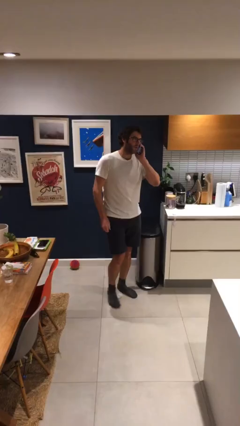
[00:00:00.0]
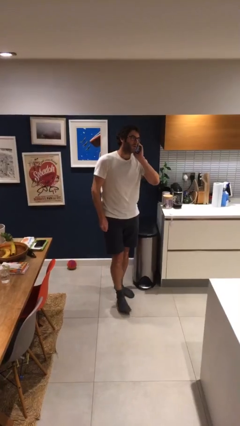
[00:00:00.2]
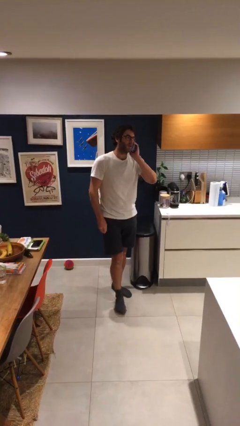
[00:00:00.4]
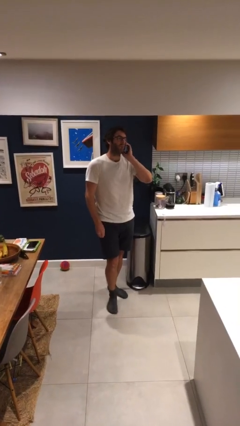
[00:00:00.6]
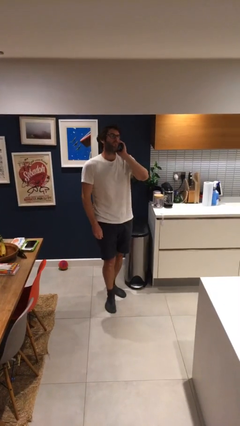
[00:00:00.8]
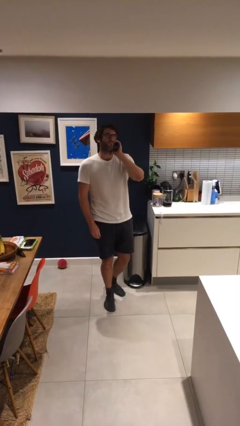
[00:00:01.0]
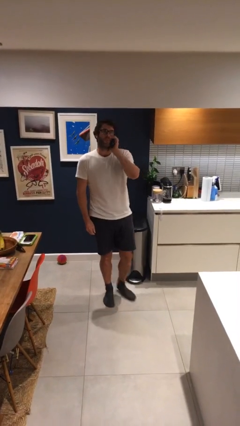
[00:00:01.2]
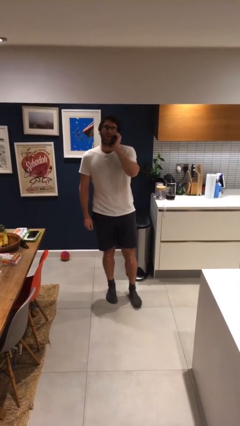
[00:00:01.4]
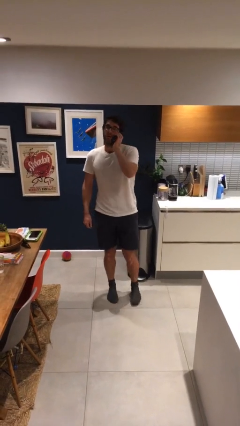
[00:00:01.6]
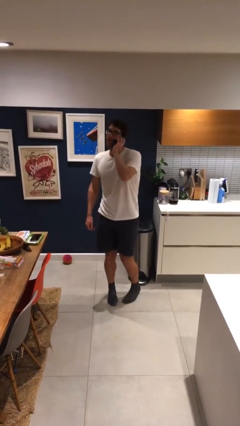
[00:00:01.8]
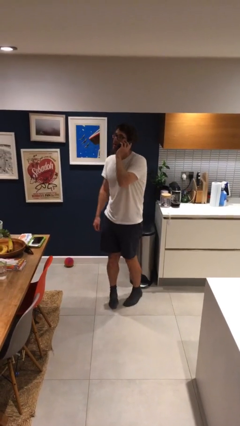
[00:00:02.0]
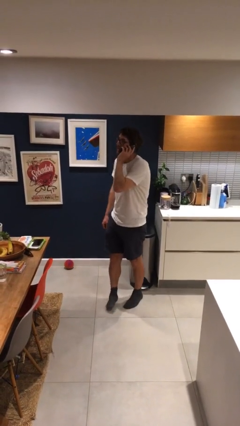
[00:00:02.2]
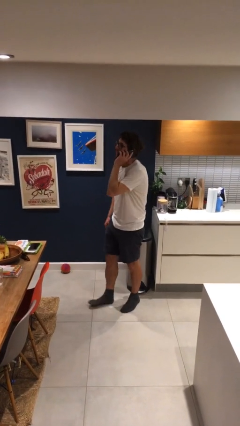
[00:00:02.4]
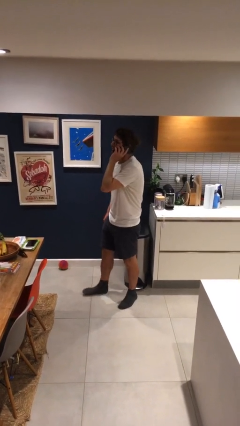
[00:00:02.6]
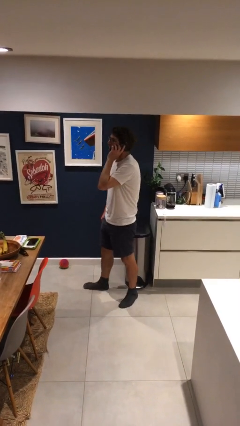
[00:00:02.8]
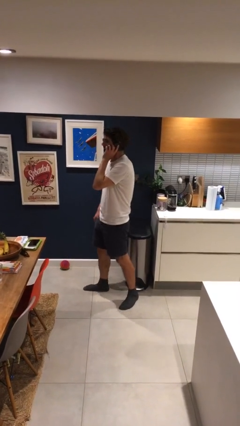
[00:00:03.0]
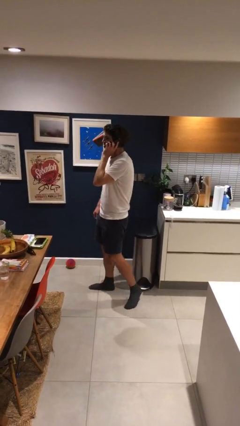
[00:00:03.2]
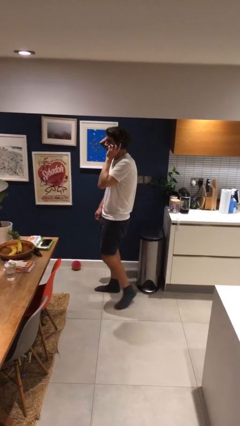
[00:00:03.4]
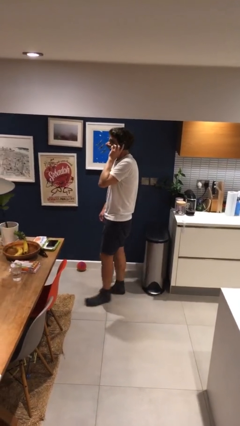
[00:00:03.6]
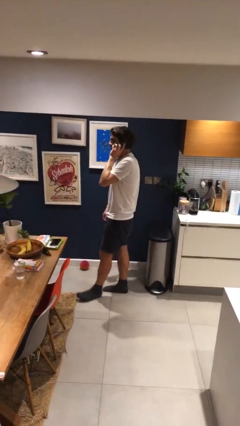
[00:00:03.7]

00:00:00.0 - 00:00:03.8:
person talks on phone

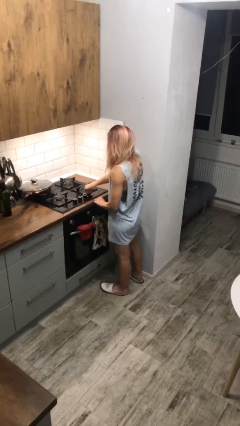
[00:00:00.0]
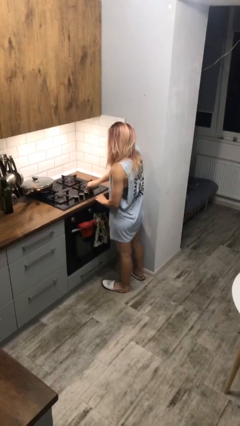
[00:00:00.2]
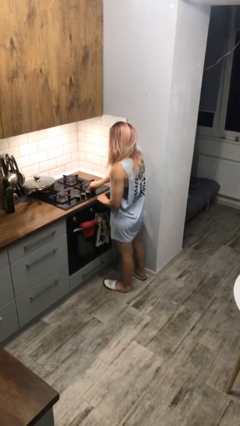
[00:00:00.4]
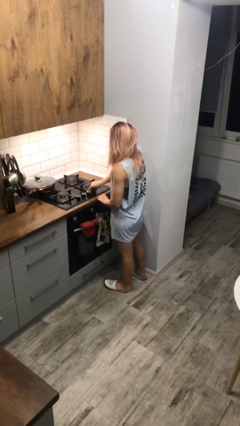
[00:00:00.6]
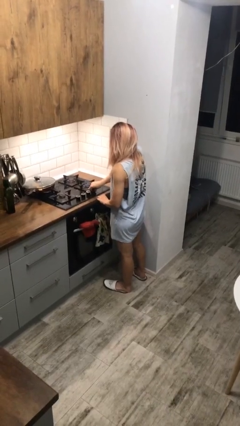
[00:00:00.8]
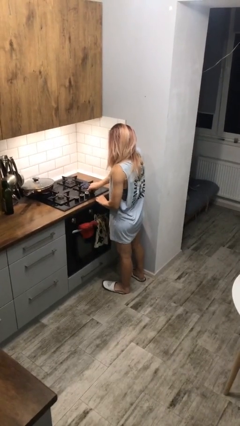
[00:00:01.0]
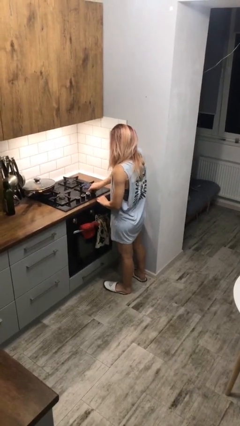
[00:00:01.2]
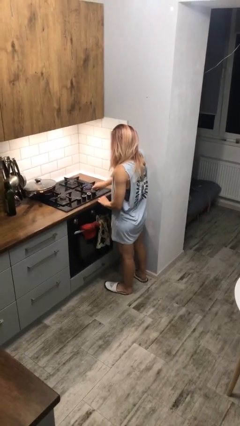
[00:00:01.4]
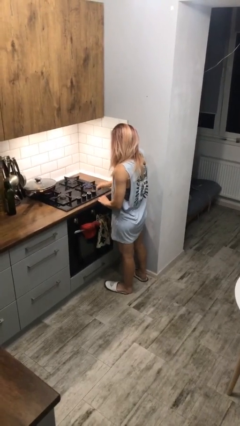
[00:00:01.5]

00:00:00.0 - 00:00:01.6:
person turns on stovetop

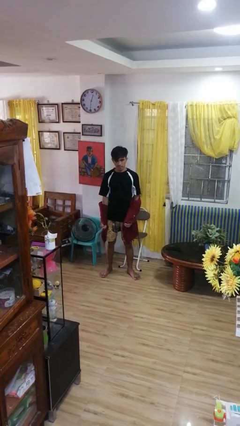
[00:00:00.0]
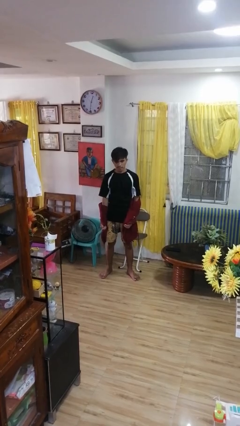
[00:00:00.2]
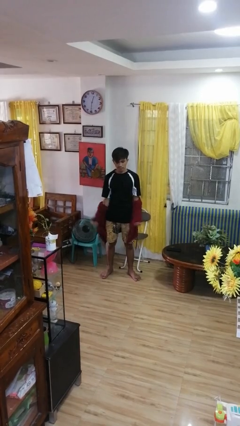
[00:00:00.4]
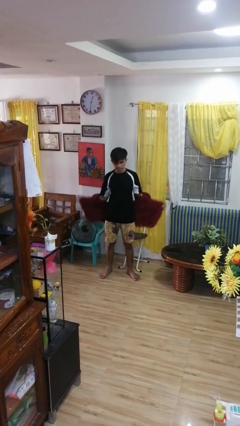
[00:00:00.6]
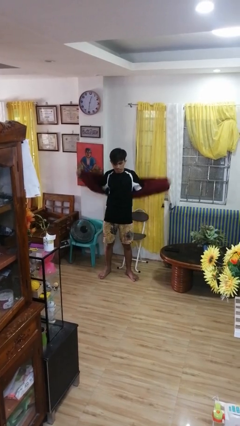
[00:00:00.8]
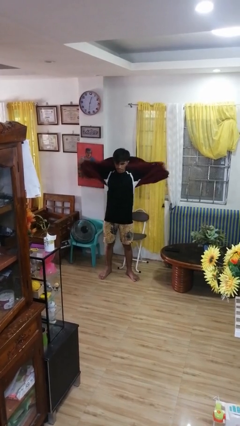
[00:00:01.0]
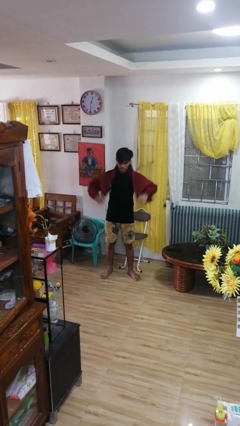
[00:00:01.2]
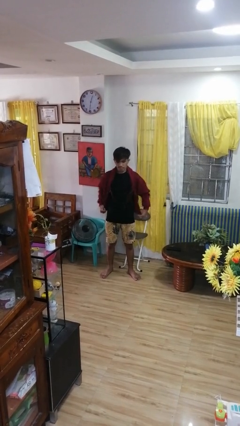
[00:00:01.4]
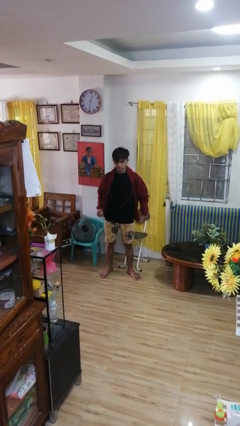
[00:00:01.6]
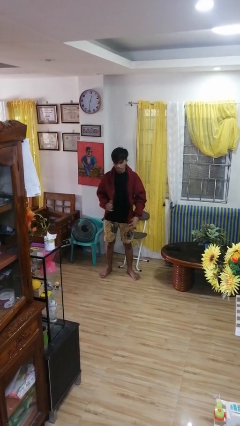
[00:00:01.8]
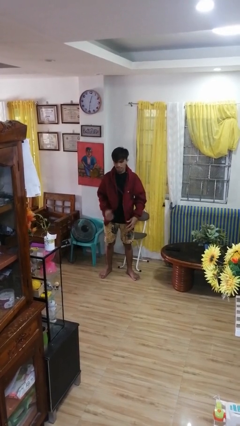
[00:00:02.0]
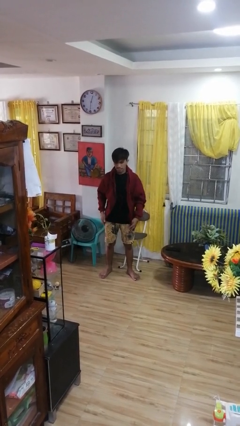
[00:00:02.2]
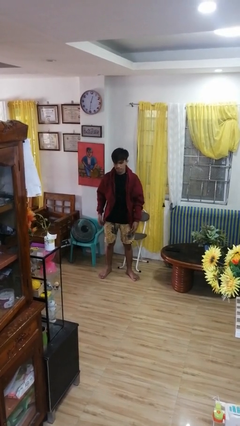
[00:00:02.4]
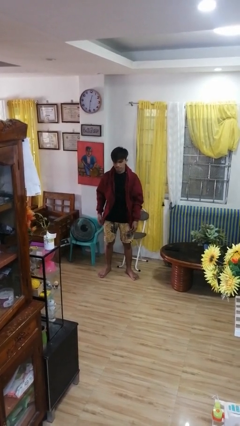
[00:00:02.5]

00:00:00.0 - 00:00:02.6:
person puts on jacket

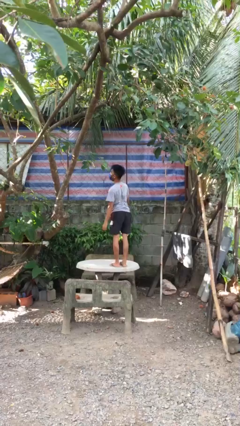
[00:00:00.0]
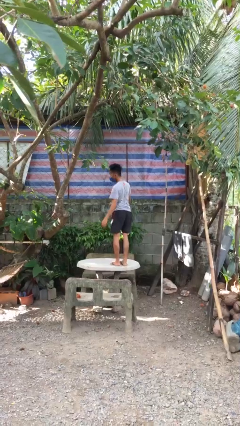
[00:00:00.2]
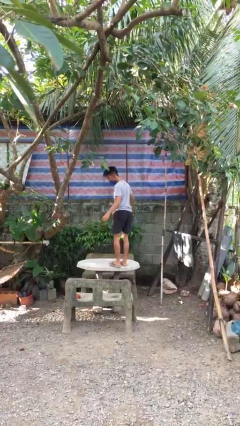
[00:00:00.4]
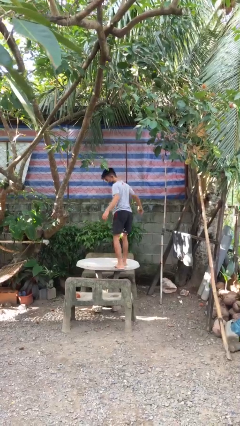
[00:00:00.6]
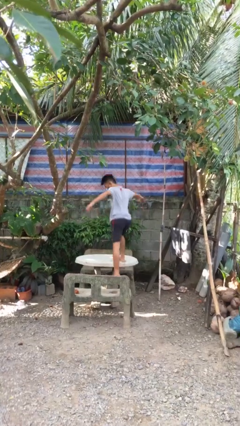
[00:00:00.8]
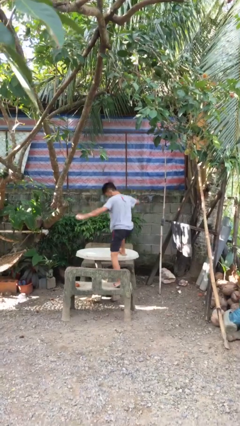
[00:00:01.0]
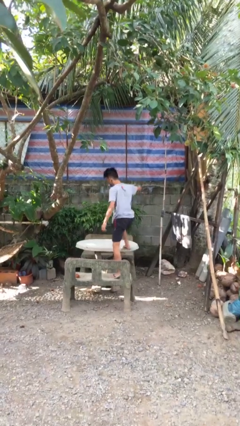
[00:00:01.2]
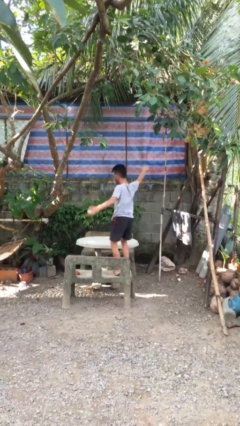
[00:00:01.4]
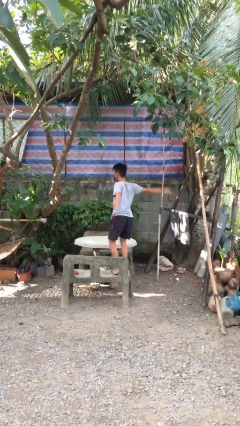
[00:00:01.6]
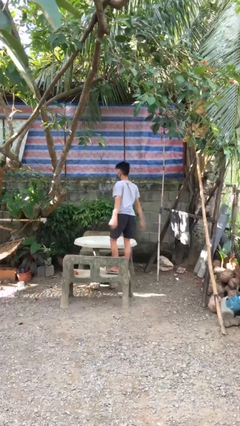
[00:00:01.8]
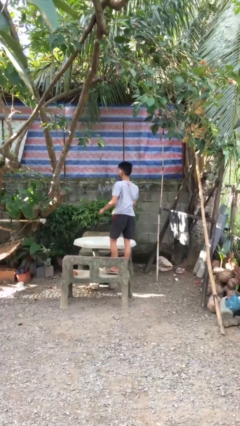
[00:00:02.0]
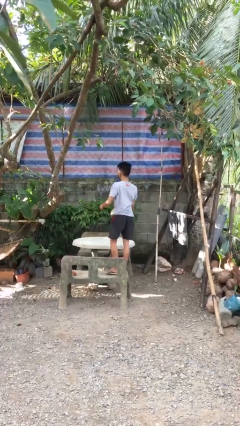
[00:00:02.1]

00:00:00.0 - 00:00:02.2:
person climbs off table

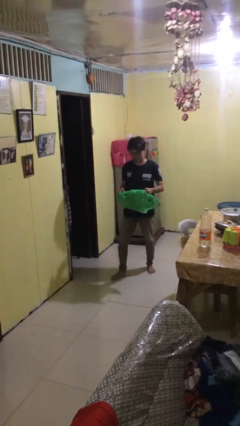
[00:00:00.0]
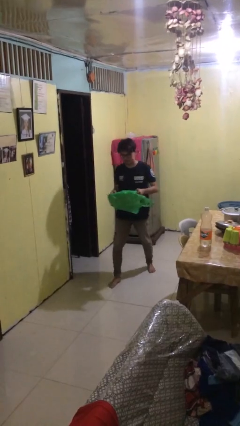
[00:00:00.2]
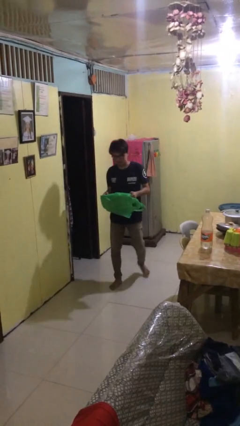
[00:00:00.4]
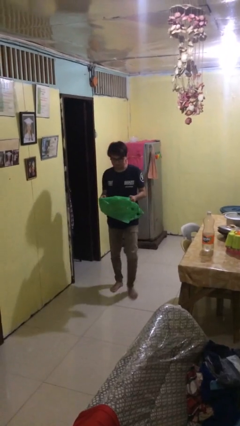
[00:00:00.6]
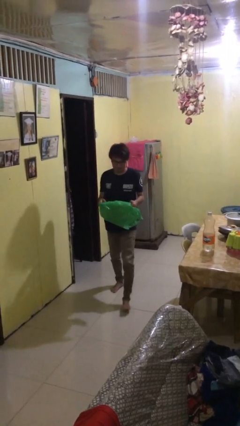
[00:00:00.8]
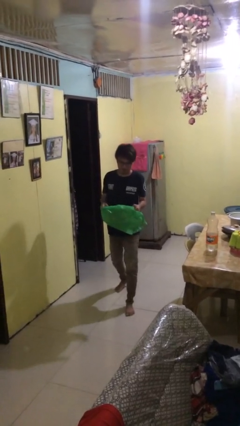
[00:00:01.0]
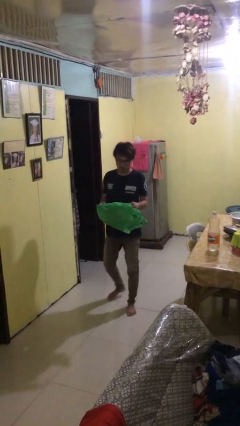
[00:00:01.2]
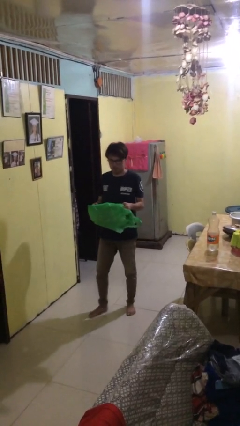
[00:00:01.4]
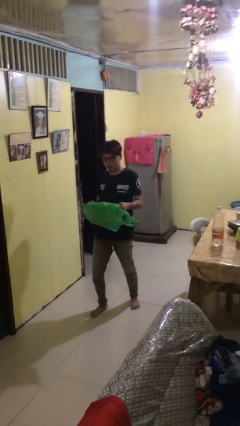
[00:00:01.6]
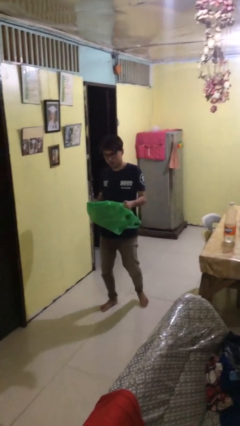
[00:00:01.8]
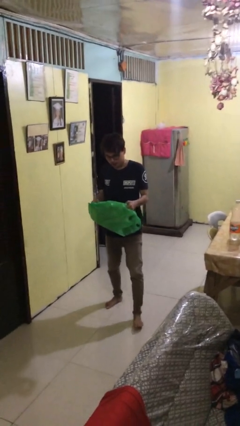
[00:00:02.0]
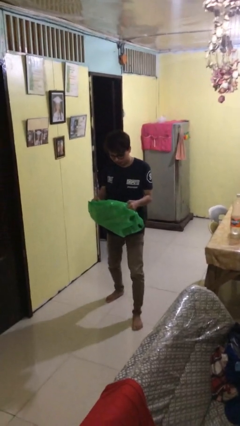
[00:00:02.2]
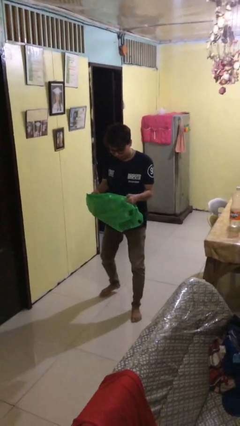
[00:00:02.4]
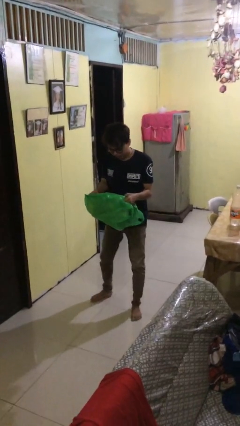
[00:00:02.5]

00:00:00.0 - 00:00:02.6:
person carries heavy object

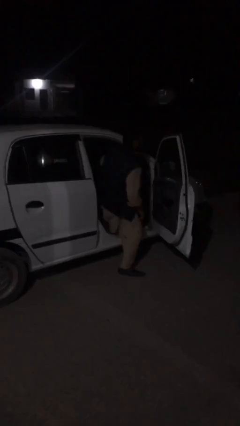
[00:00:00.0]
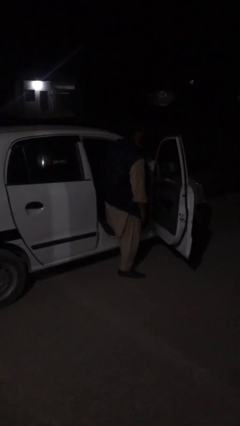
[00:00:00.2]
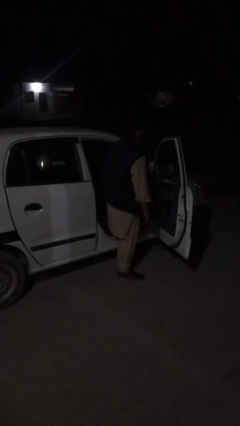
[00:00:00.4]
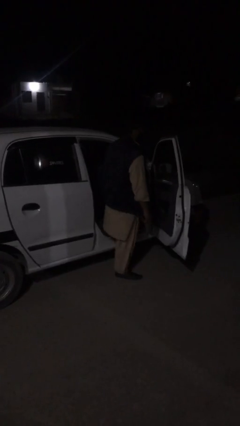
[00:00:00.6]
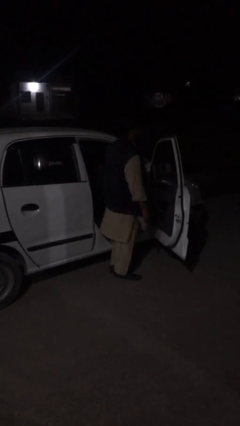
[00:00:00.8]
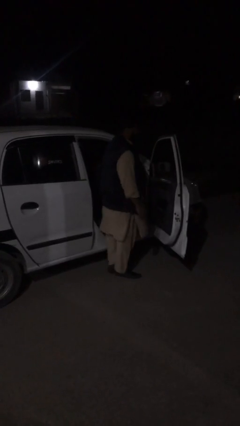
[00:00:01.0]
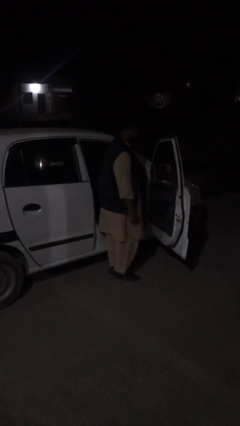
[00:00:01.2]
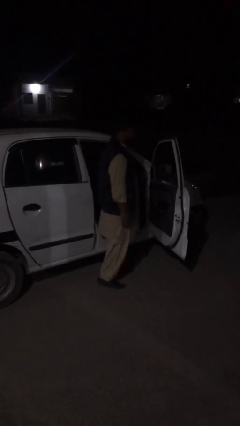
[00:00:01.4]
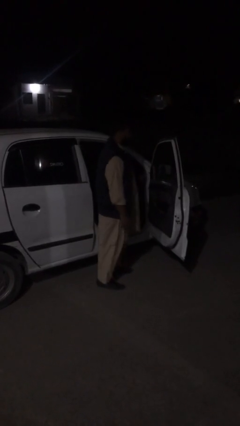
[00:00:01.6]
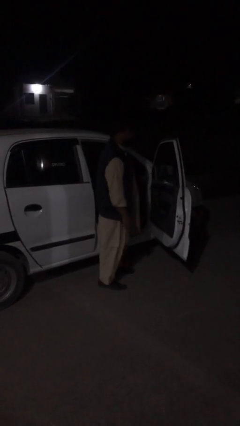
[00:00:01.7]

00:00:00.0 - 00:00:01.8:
person exits car

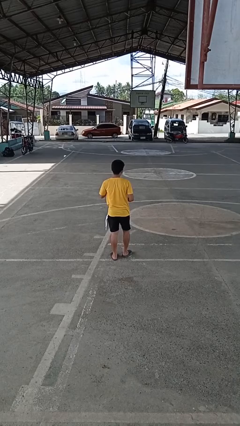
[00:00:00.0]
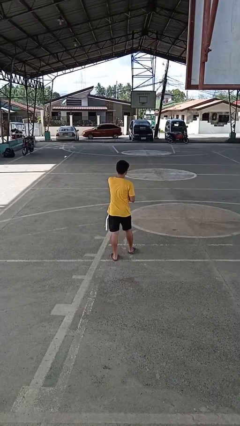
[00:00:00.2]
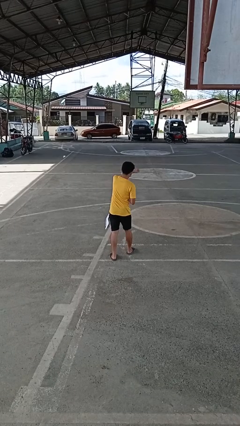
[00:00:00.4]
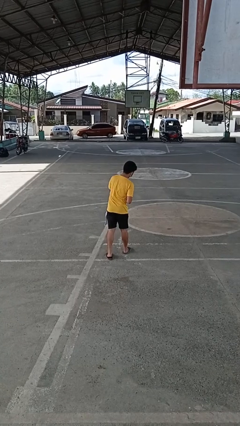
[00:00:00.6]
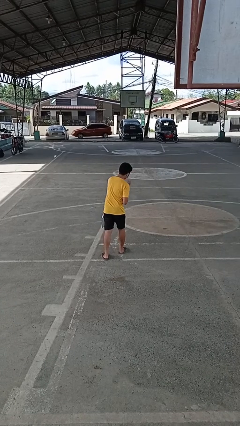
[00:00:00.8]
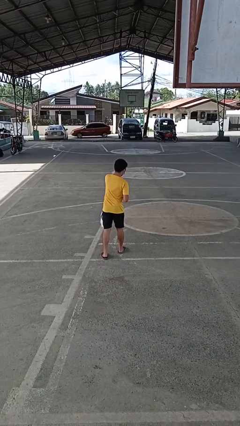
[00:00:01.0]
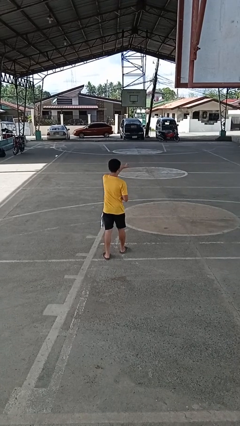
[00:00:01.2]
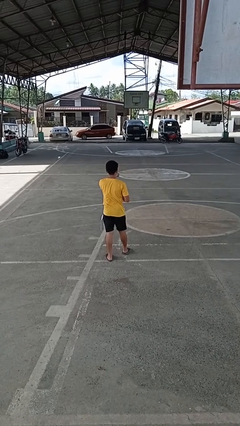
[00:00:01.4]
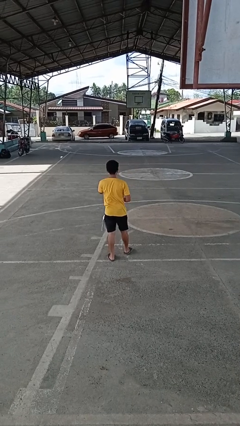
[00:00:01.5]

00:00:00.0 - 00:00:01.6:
person punches

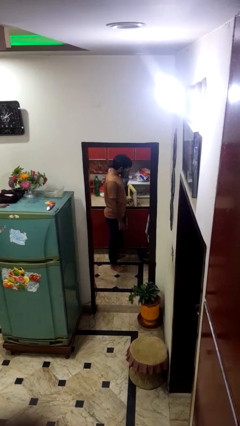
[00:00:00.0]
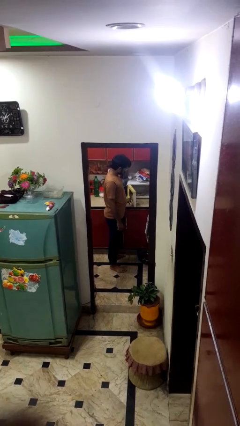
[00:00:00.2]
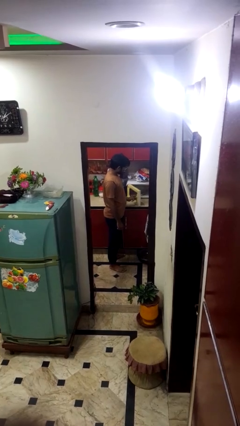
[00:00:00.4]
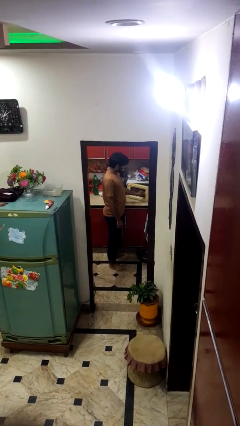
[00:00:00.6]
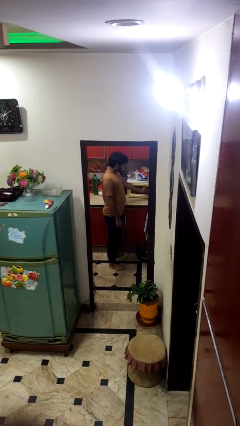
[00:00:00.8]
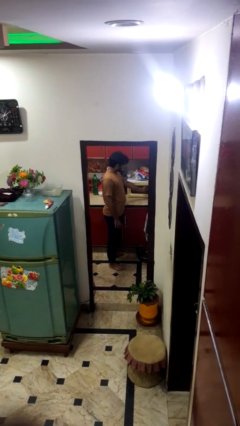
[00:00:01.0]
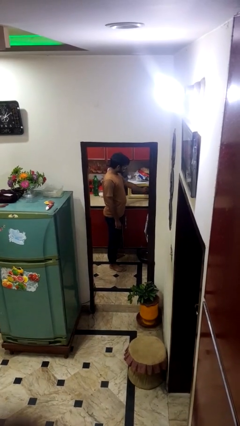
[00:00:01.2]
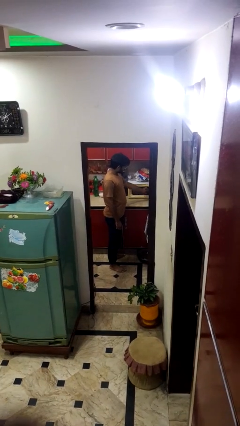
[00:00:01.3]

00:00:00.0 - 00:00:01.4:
person closes microwave
